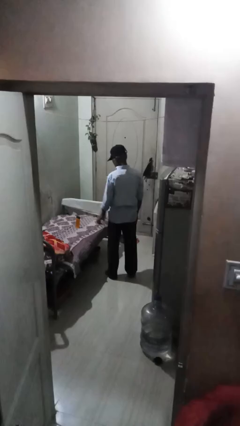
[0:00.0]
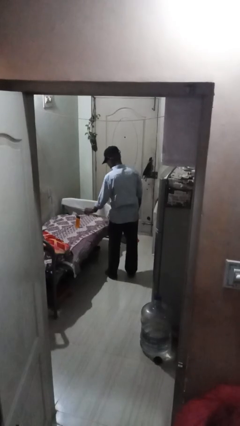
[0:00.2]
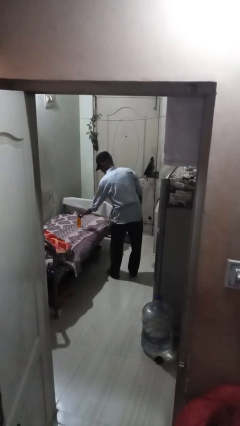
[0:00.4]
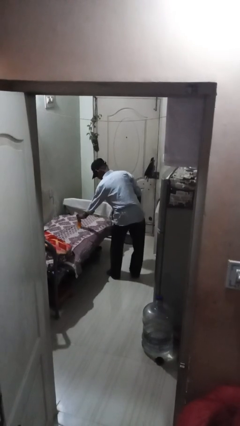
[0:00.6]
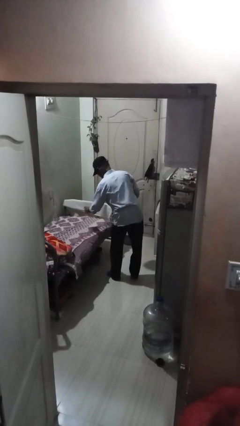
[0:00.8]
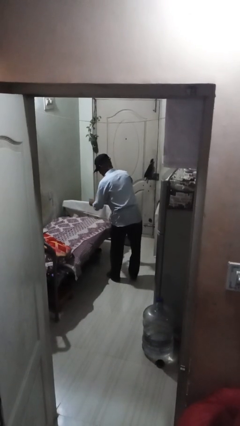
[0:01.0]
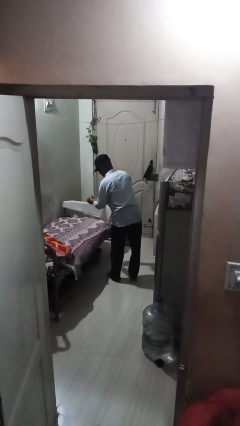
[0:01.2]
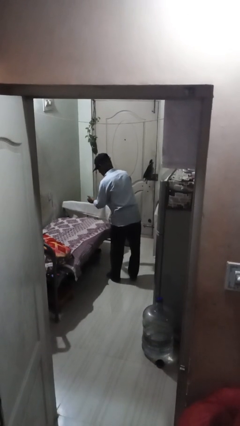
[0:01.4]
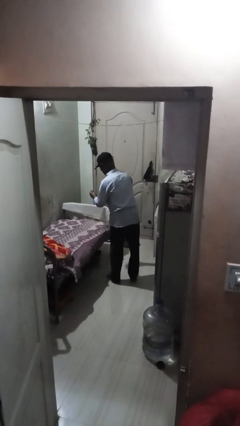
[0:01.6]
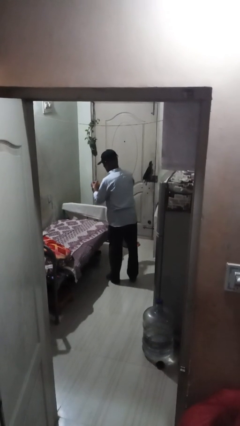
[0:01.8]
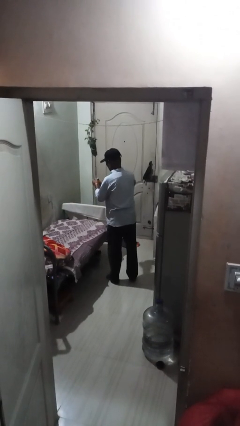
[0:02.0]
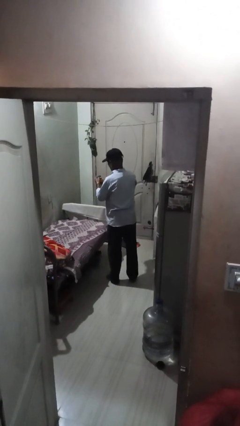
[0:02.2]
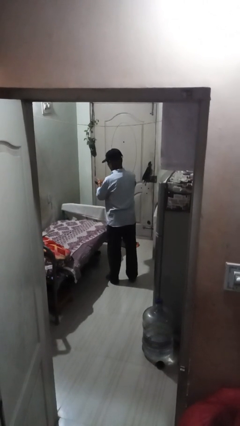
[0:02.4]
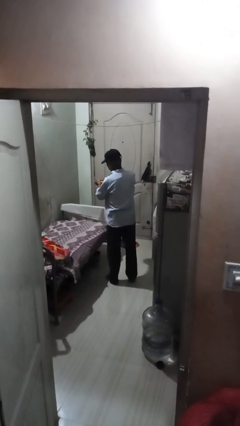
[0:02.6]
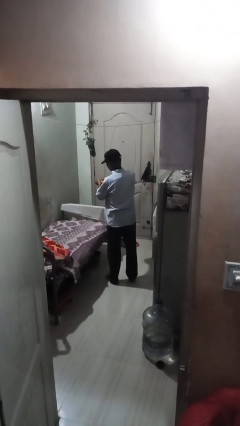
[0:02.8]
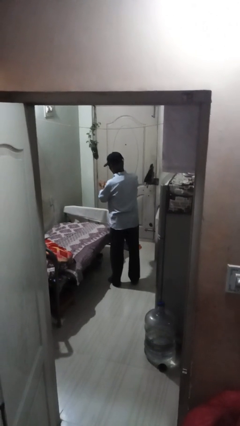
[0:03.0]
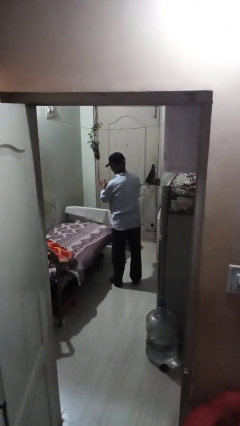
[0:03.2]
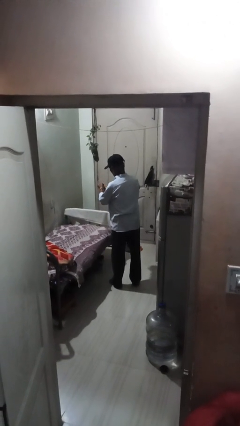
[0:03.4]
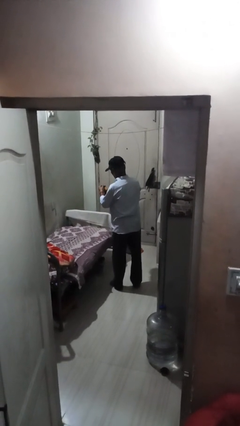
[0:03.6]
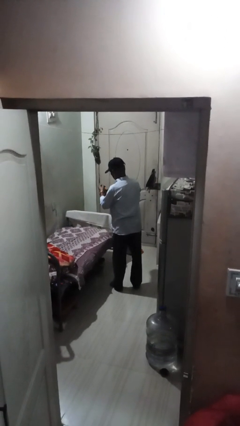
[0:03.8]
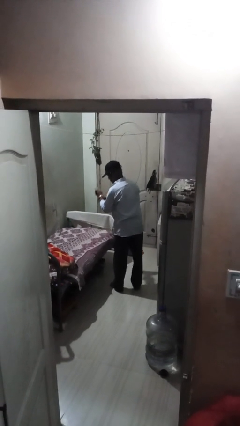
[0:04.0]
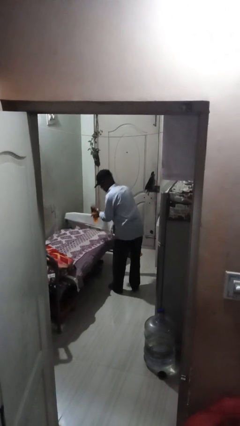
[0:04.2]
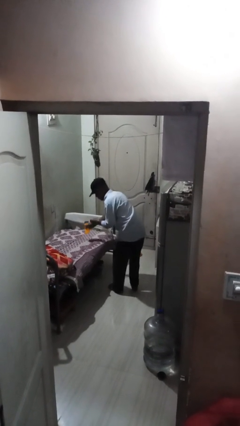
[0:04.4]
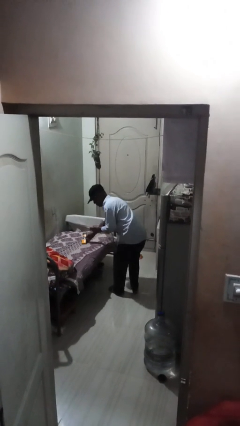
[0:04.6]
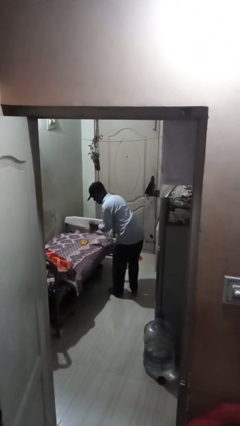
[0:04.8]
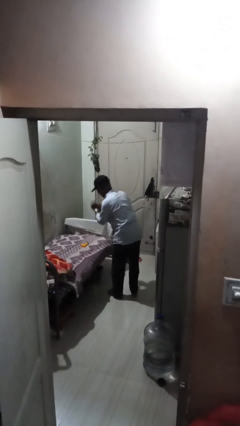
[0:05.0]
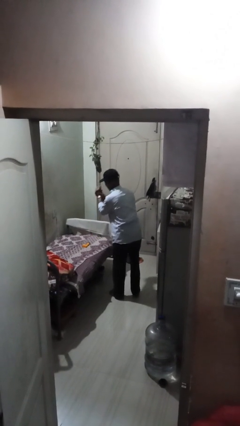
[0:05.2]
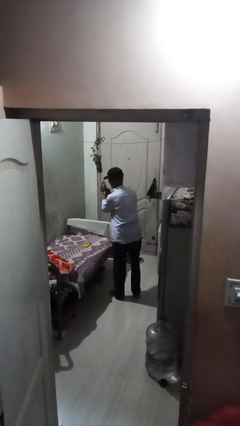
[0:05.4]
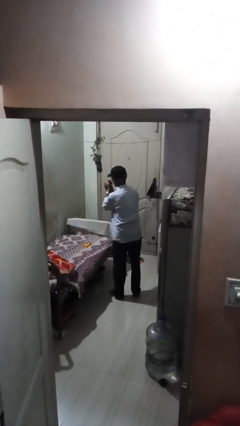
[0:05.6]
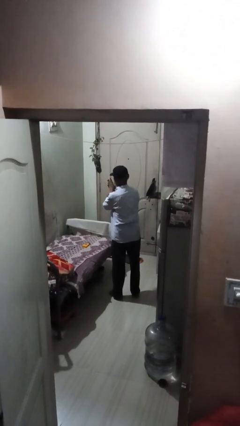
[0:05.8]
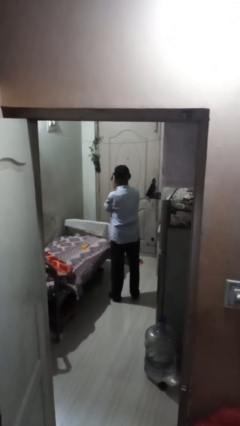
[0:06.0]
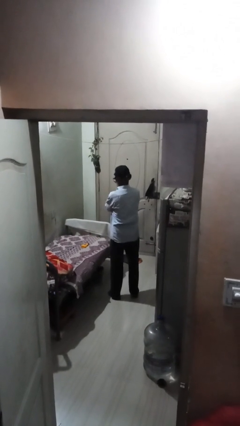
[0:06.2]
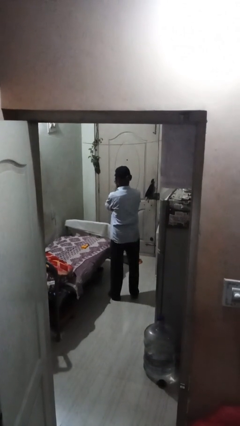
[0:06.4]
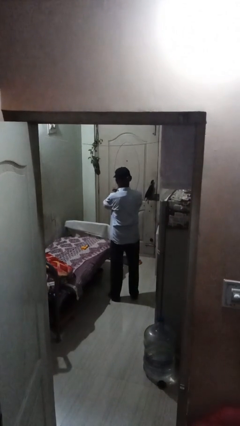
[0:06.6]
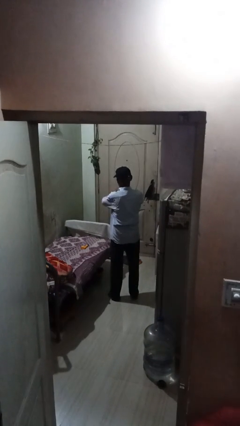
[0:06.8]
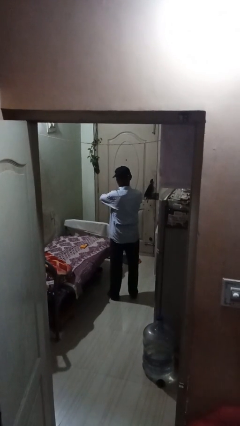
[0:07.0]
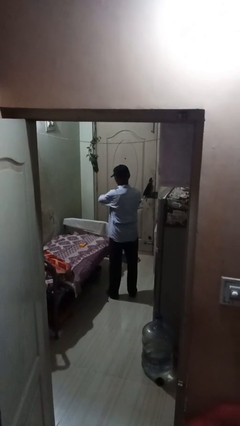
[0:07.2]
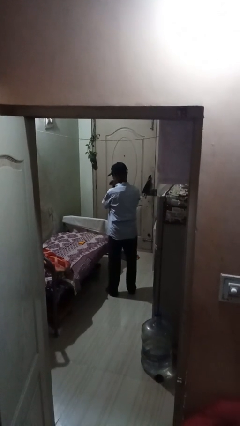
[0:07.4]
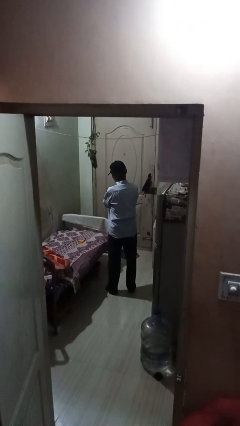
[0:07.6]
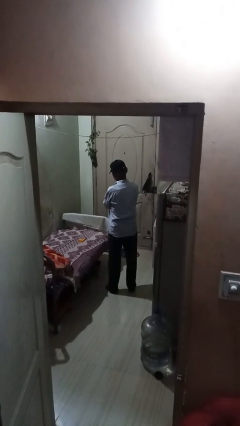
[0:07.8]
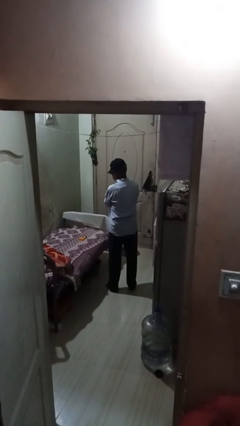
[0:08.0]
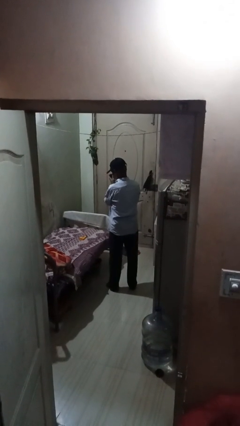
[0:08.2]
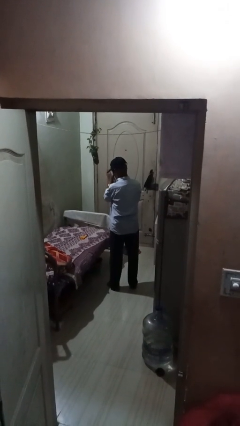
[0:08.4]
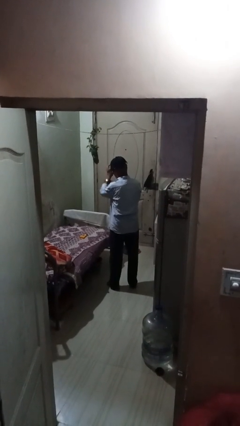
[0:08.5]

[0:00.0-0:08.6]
person applies sunscreen

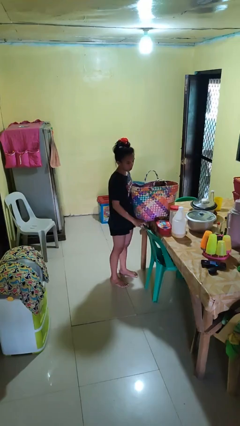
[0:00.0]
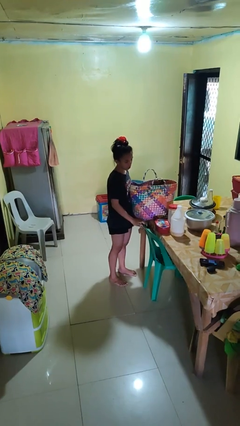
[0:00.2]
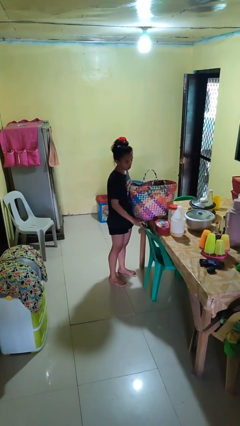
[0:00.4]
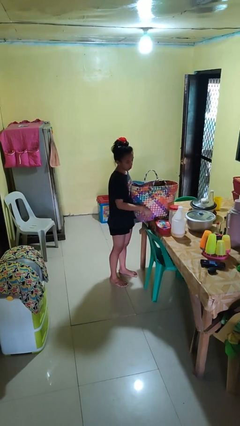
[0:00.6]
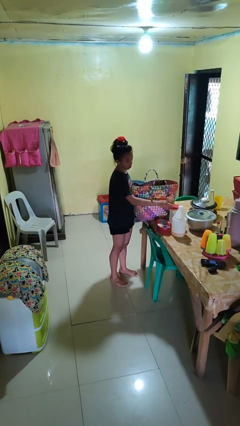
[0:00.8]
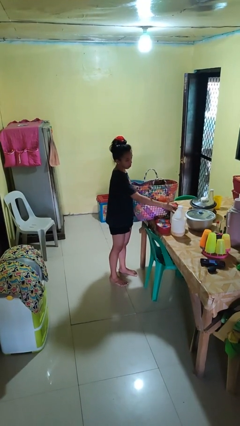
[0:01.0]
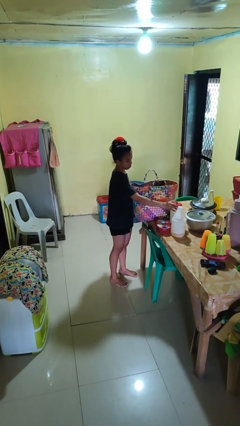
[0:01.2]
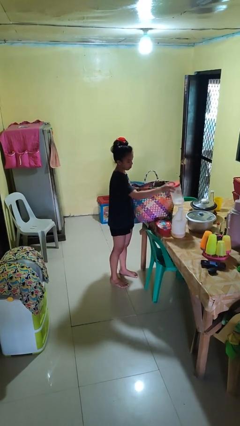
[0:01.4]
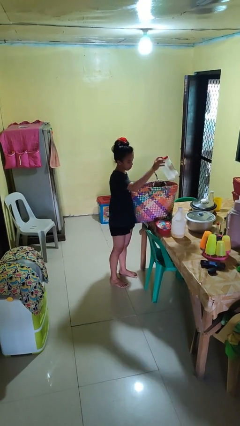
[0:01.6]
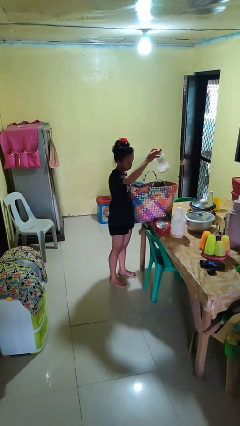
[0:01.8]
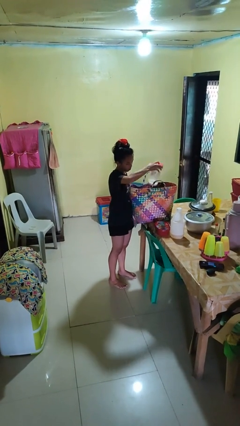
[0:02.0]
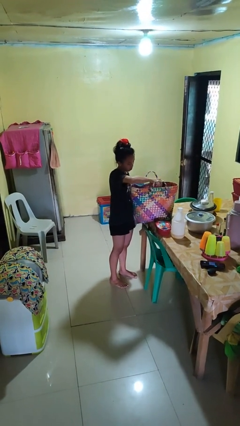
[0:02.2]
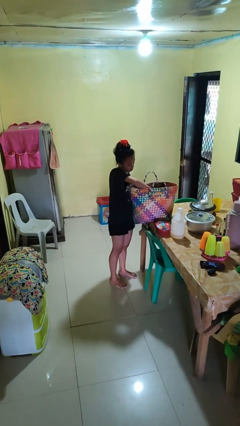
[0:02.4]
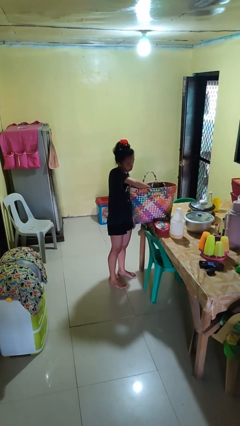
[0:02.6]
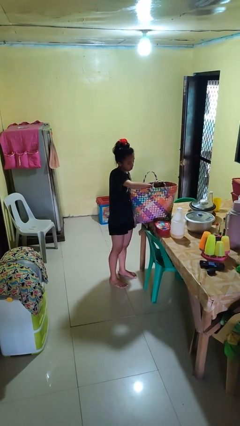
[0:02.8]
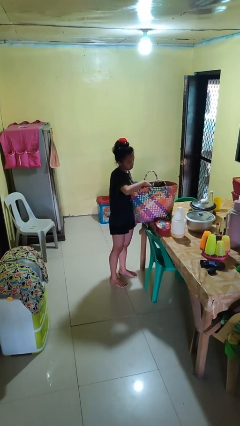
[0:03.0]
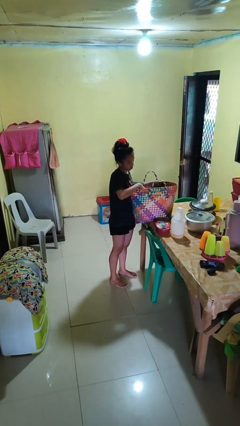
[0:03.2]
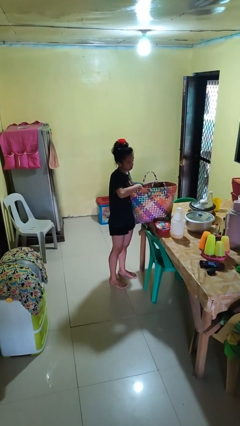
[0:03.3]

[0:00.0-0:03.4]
person puts object into basket

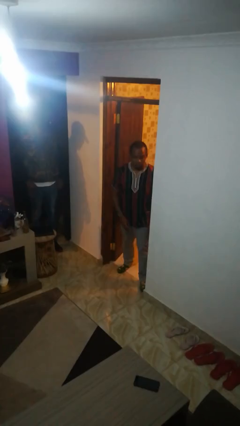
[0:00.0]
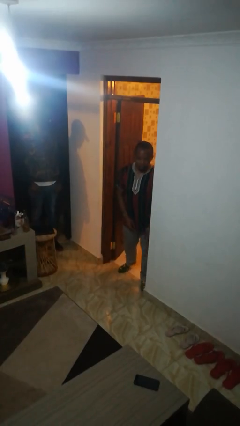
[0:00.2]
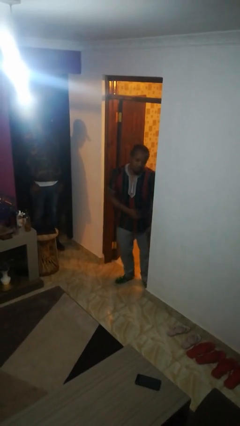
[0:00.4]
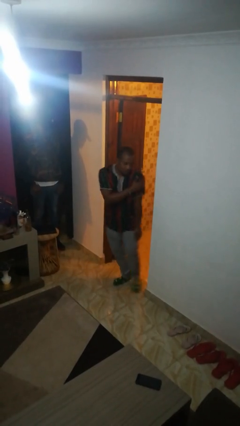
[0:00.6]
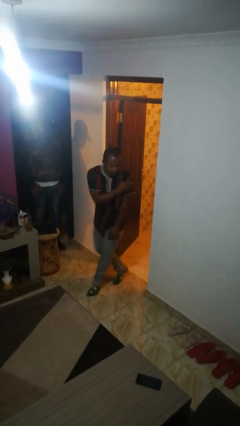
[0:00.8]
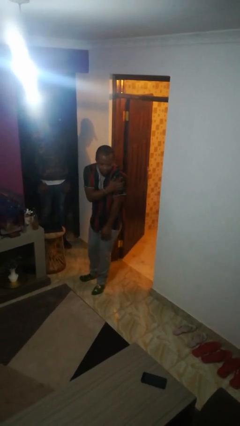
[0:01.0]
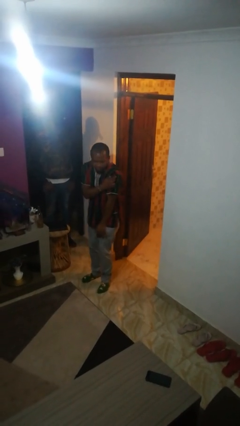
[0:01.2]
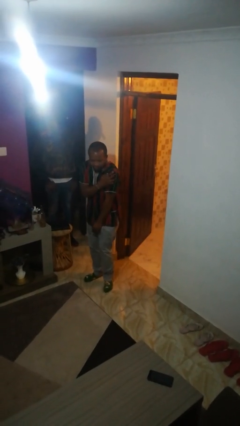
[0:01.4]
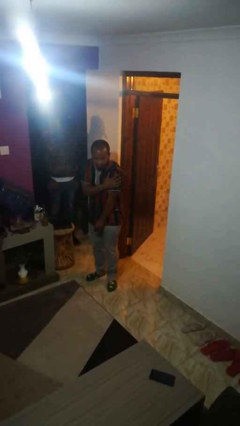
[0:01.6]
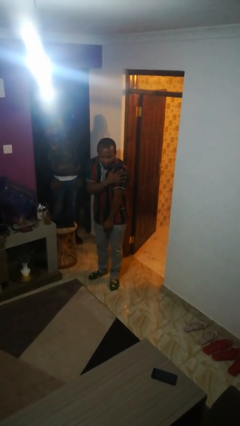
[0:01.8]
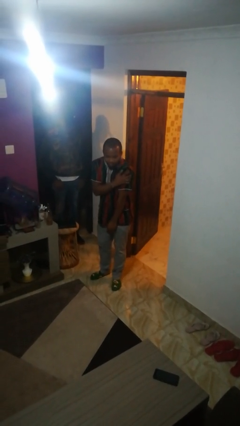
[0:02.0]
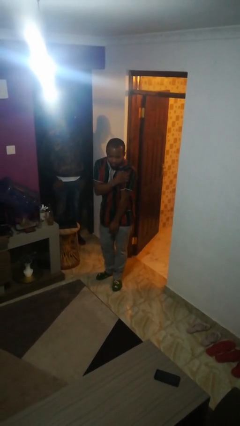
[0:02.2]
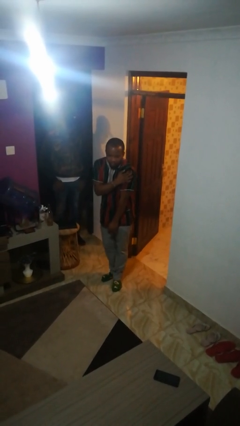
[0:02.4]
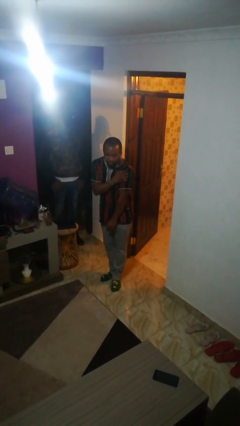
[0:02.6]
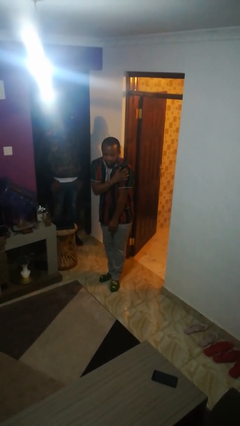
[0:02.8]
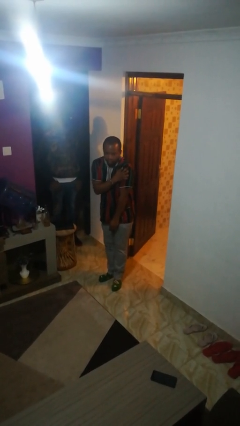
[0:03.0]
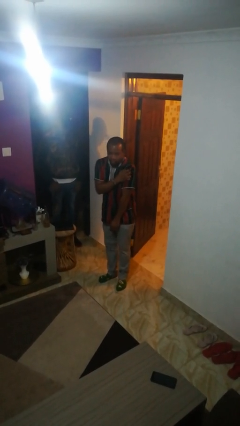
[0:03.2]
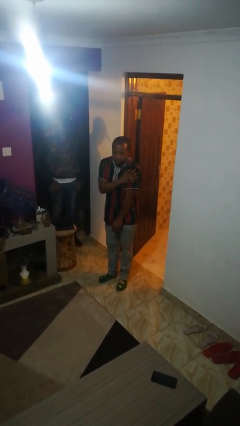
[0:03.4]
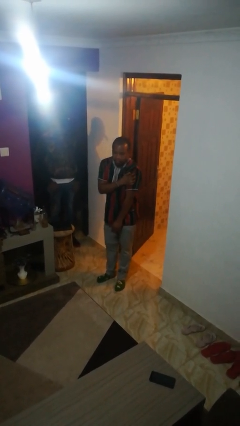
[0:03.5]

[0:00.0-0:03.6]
person bumps into wall

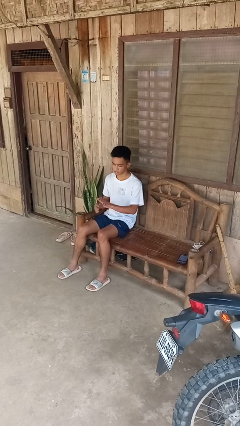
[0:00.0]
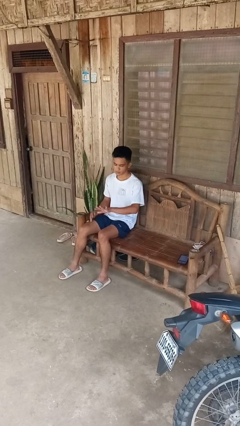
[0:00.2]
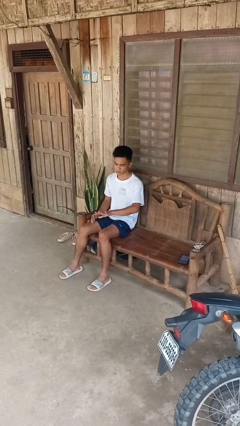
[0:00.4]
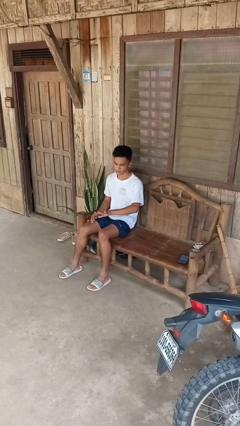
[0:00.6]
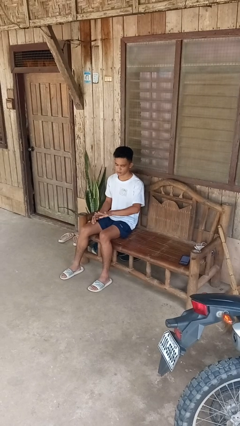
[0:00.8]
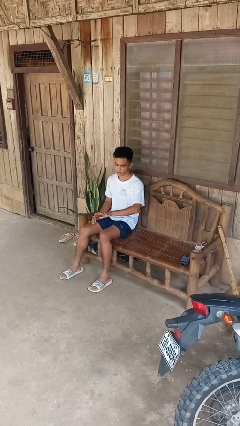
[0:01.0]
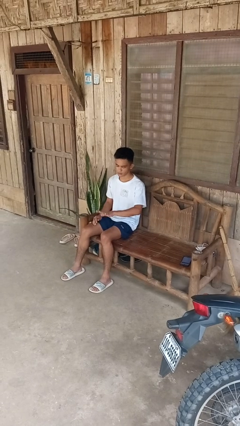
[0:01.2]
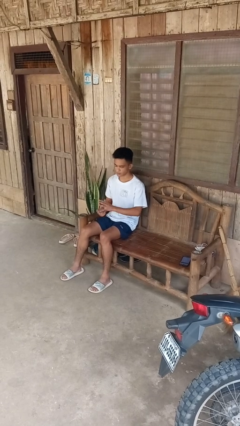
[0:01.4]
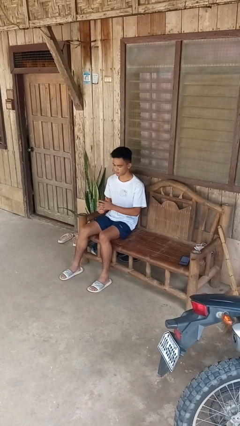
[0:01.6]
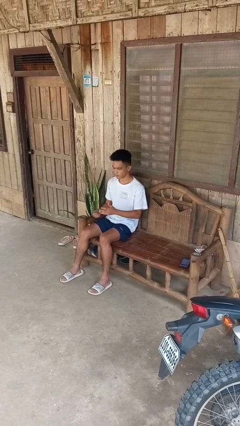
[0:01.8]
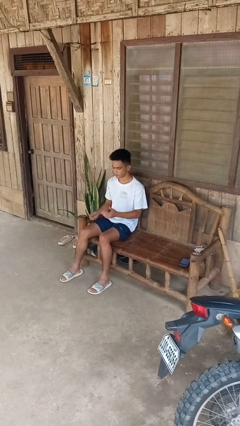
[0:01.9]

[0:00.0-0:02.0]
person puts on ring
